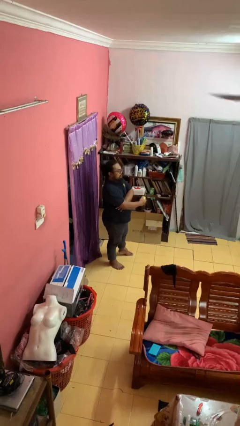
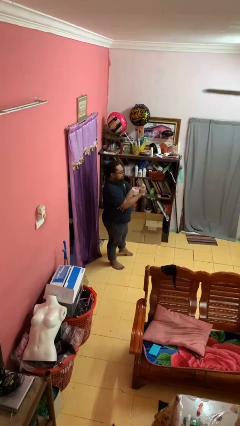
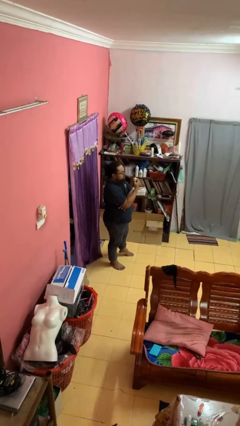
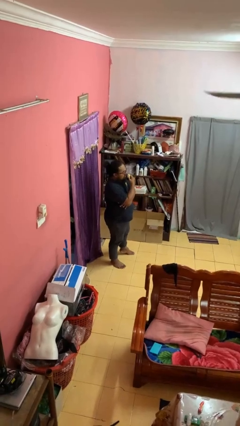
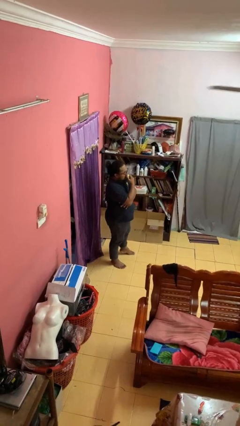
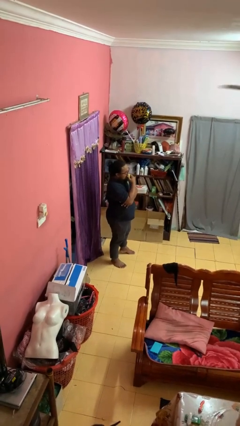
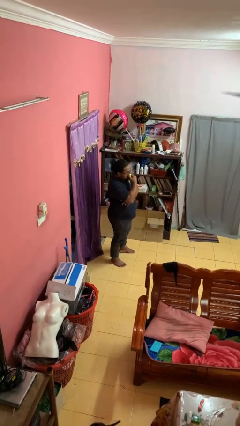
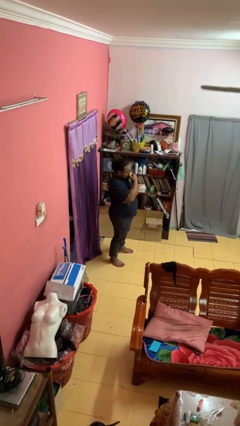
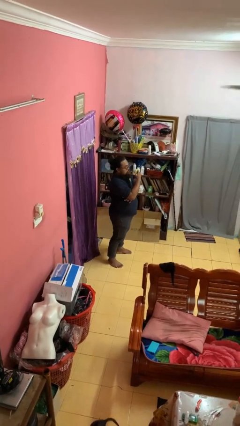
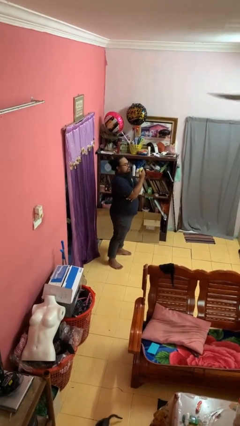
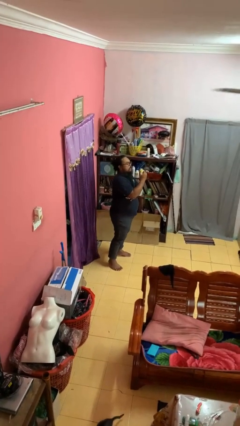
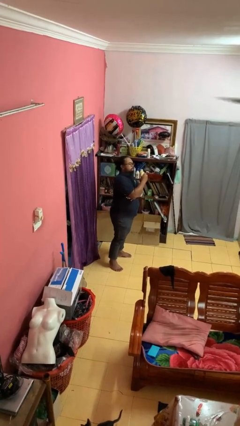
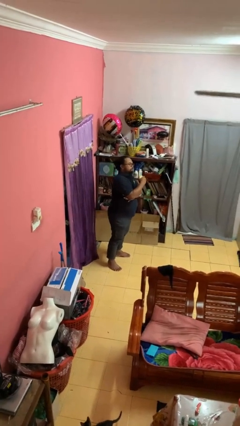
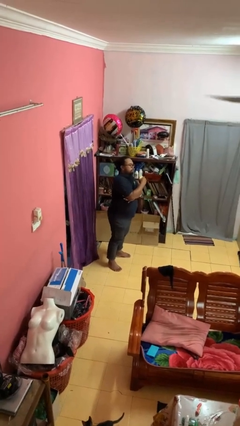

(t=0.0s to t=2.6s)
person eats apple

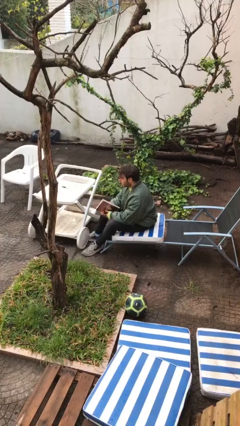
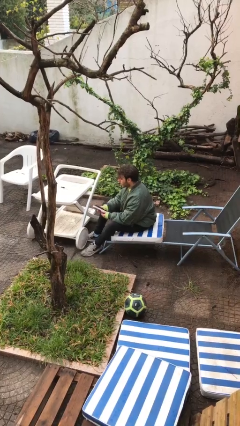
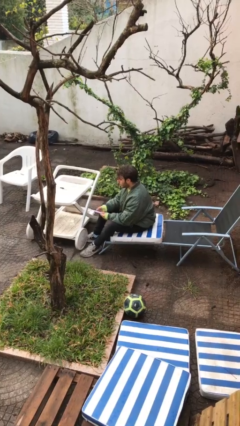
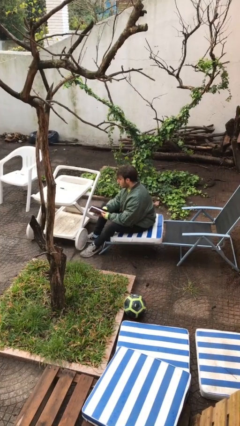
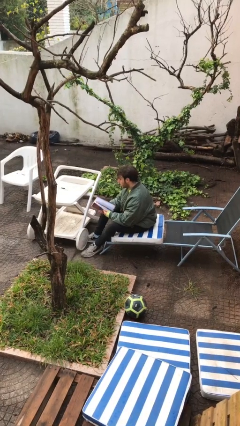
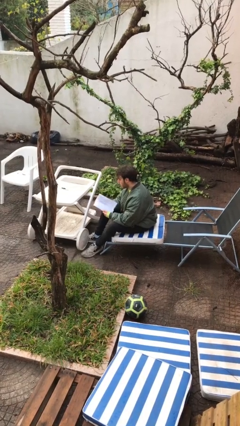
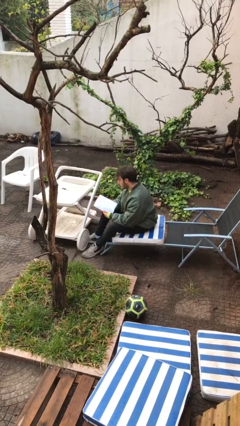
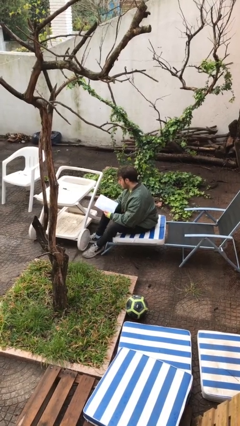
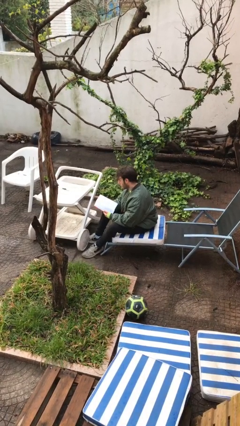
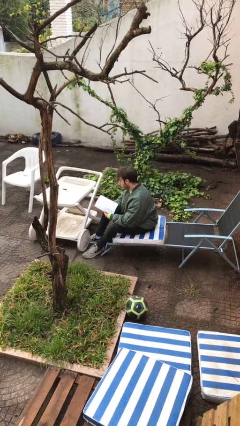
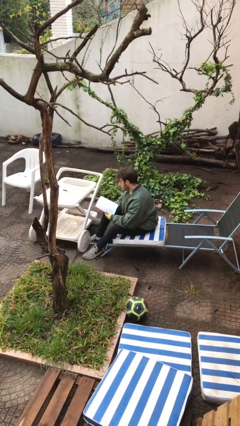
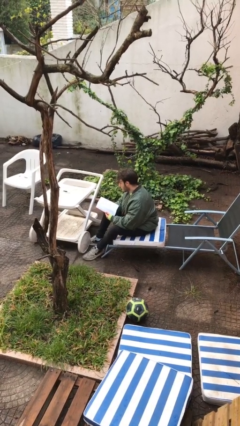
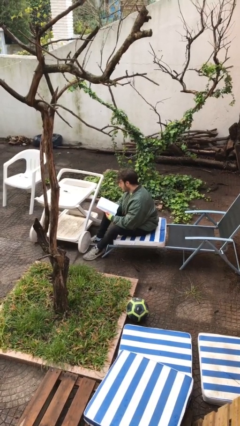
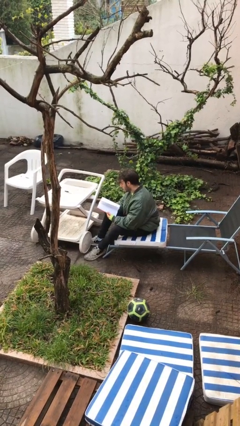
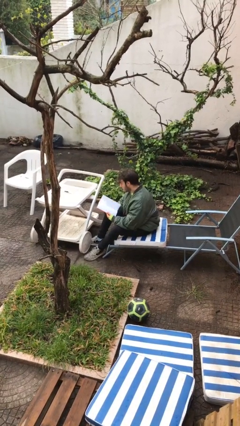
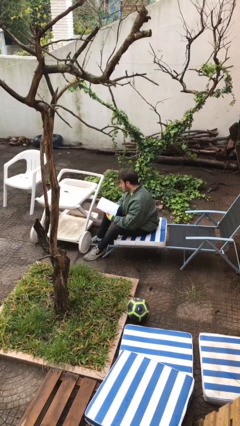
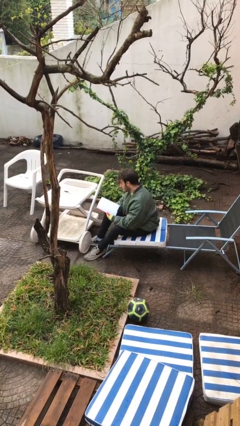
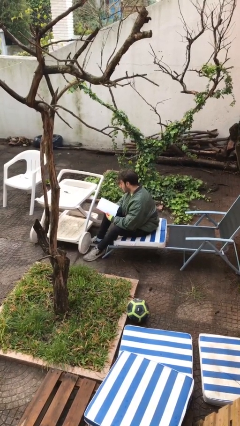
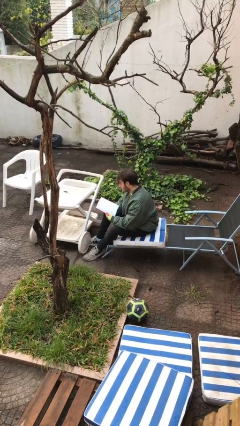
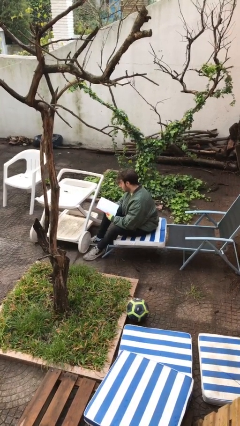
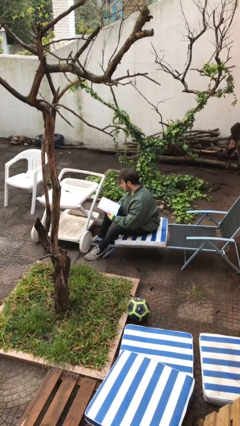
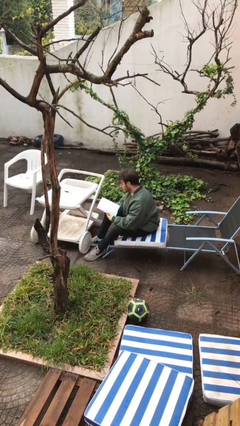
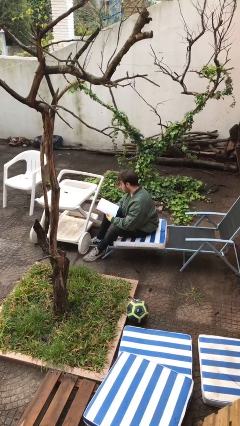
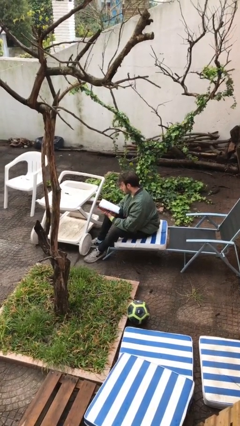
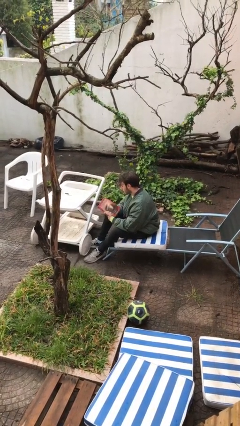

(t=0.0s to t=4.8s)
person reads document

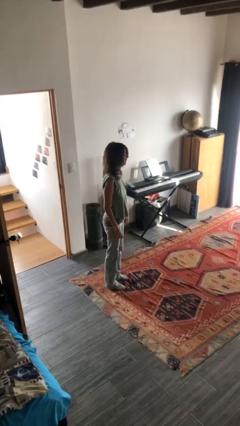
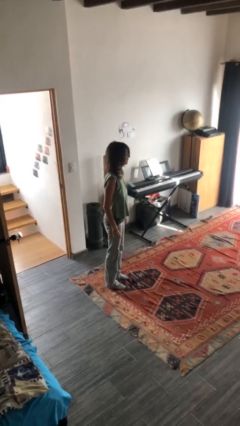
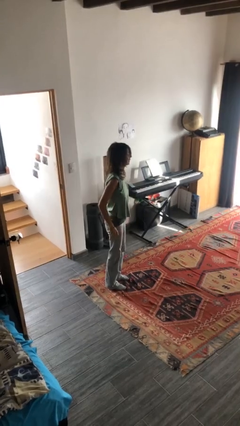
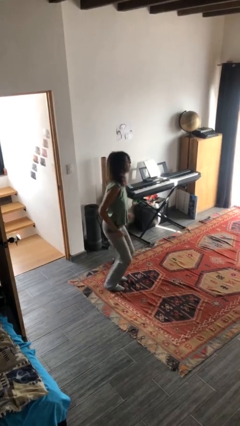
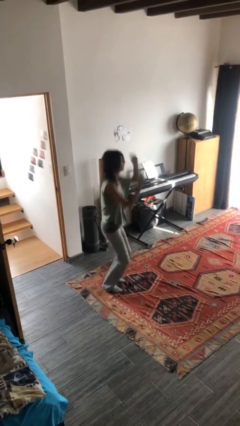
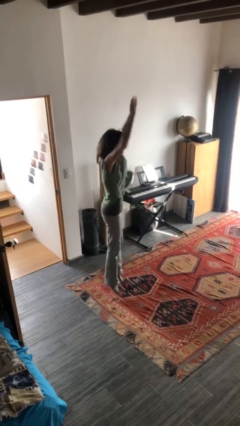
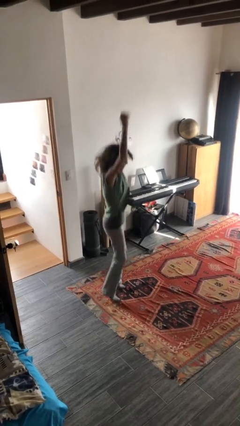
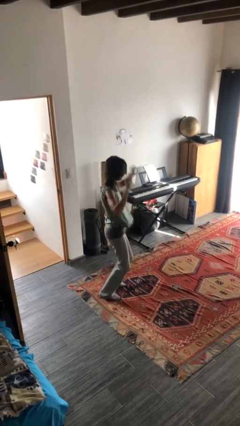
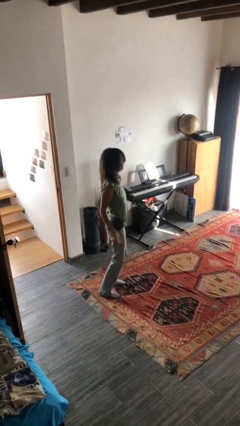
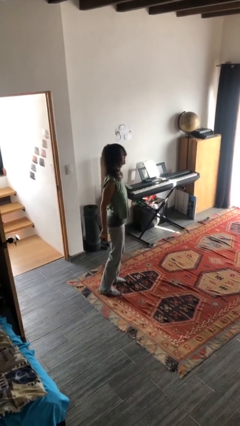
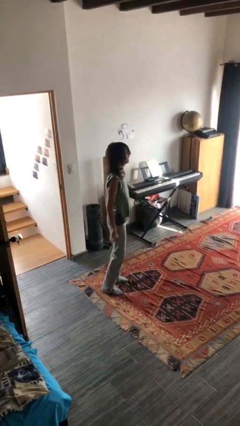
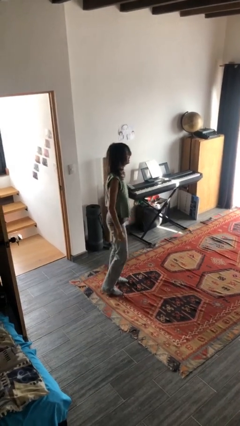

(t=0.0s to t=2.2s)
person jumps

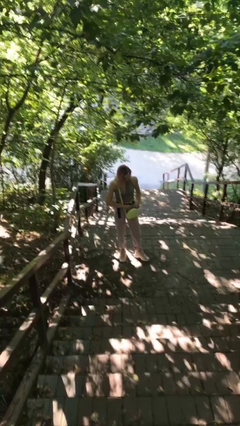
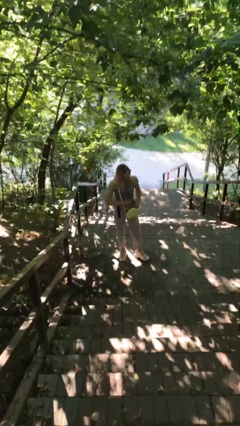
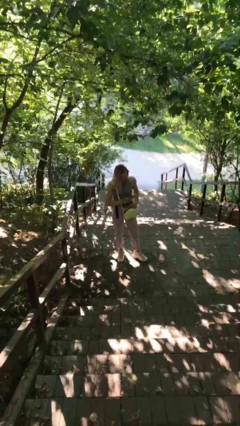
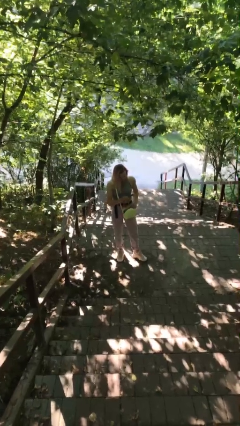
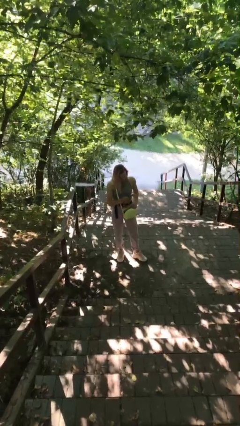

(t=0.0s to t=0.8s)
person takes object from purse

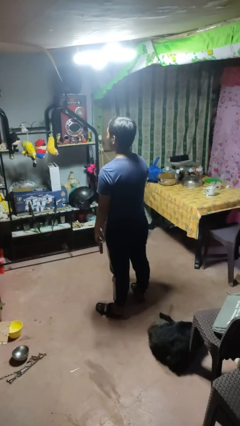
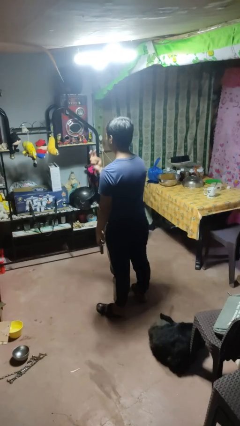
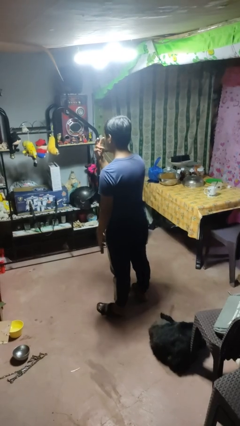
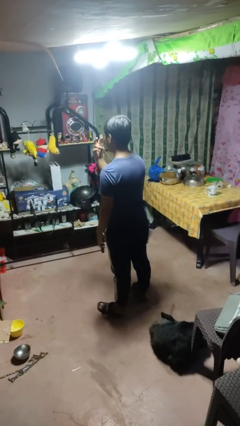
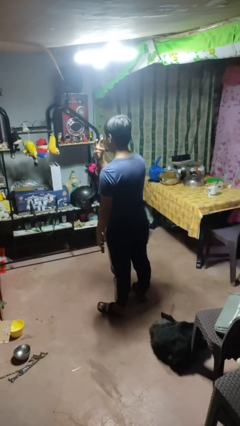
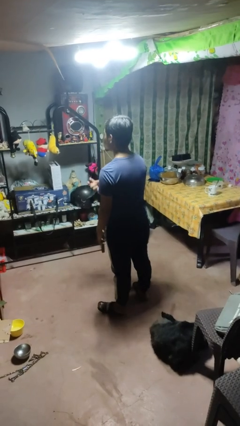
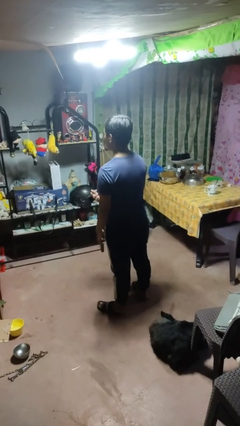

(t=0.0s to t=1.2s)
person gestures watch closely

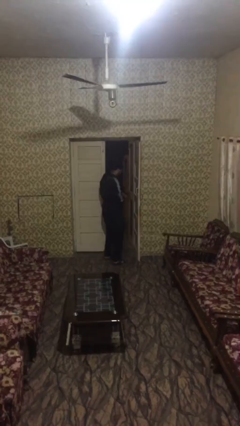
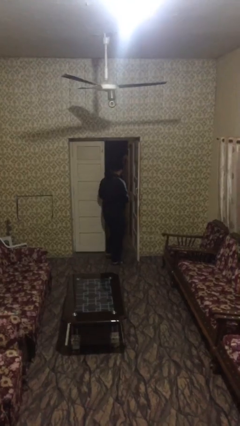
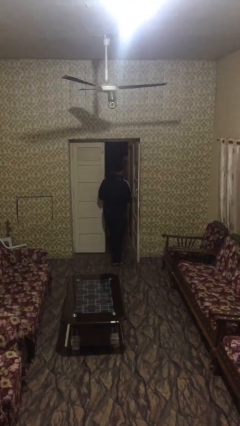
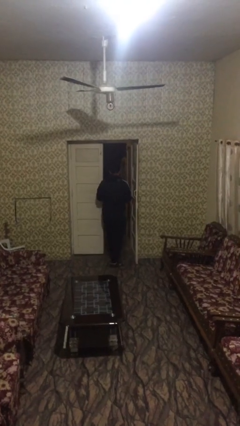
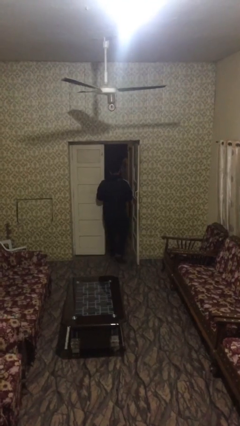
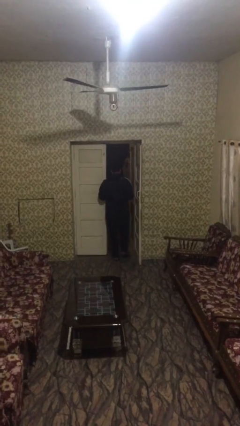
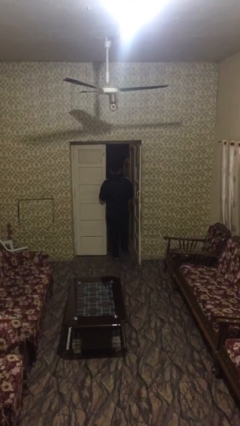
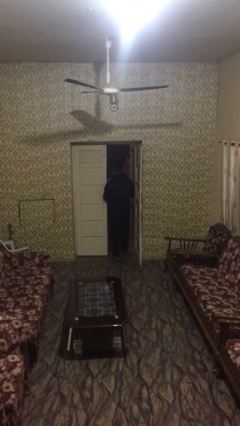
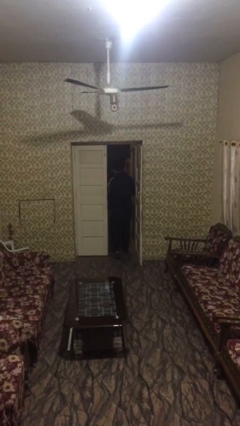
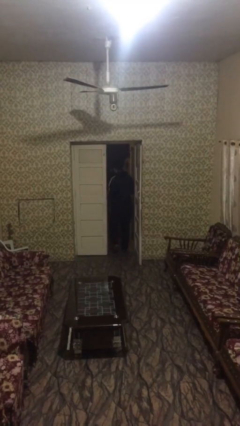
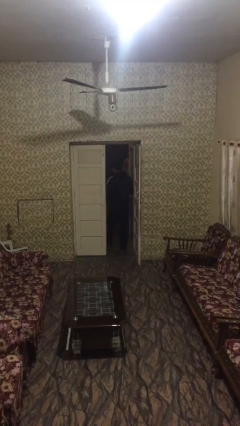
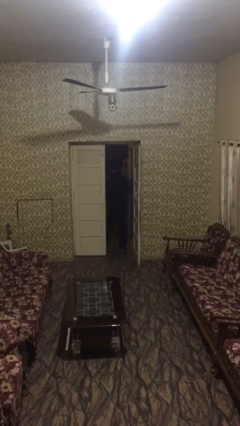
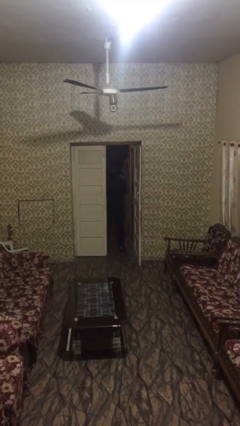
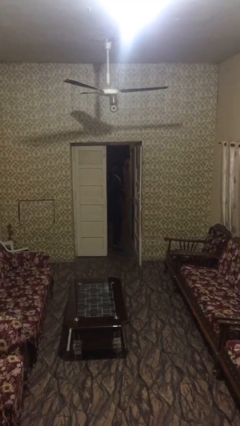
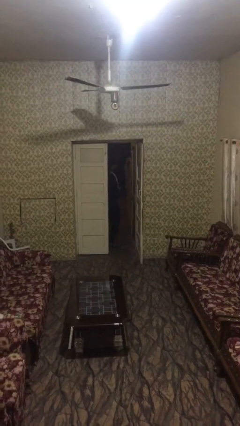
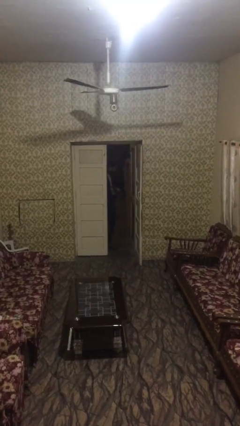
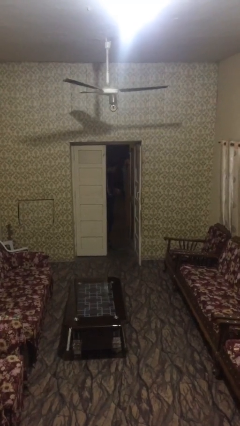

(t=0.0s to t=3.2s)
person exits scene through structure

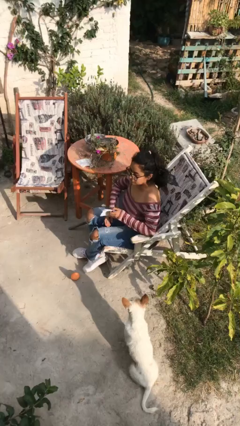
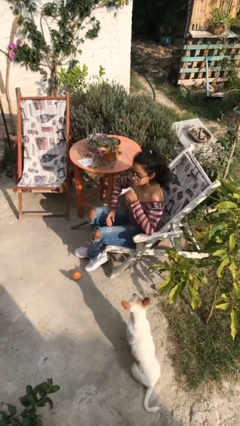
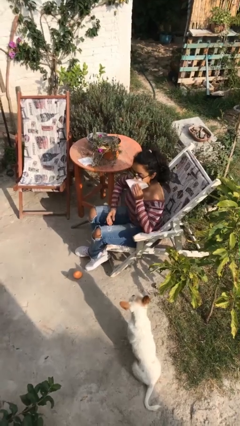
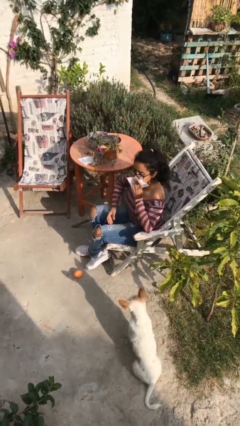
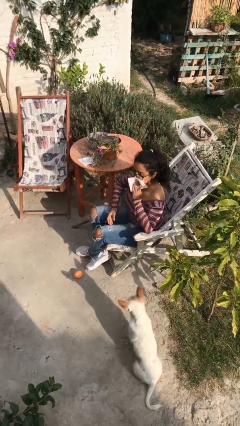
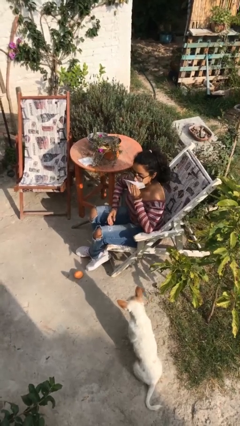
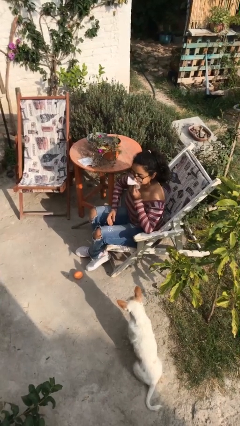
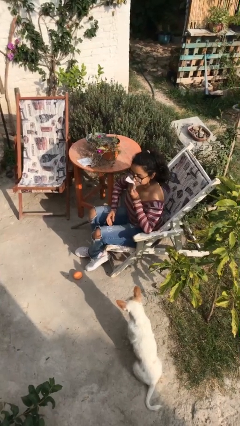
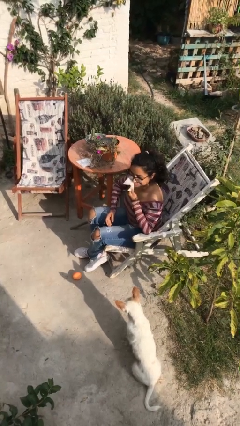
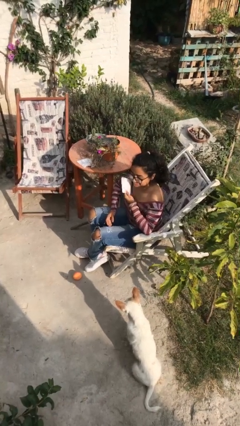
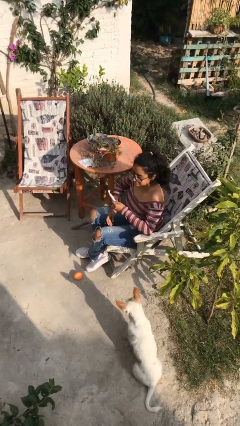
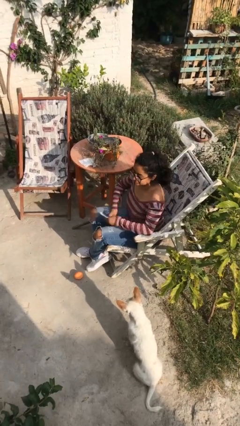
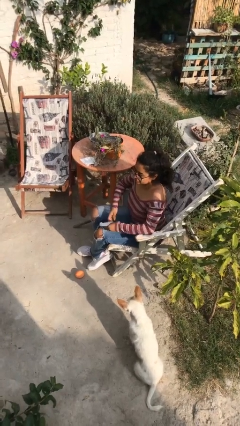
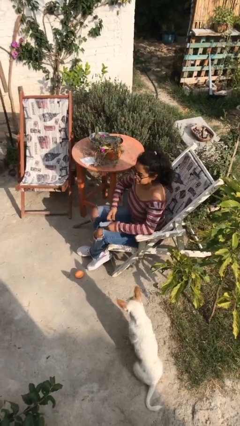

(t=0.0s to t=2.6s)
person wipes mouth with napkin
